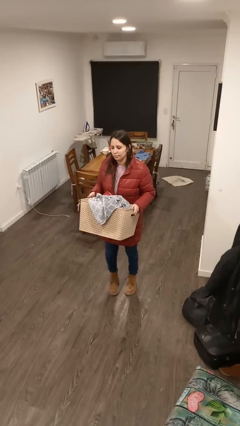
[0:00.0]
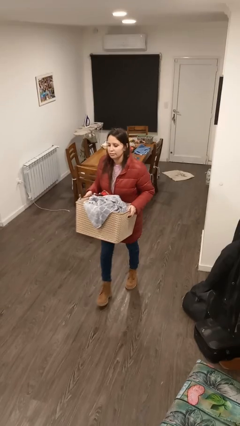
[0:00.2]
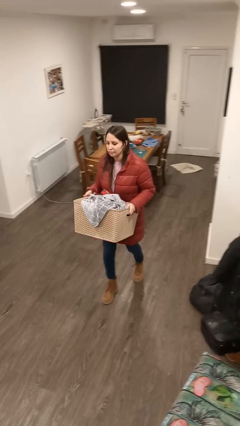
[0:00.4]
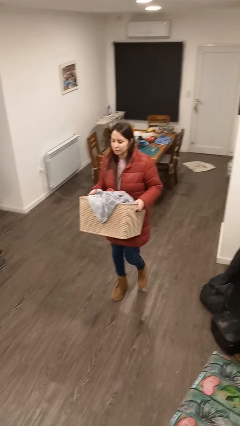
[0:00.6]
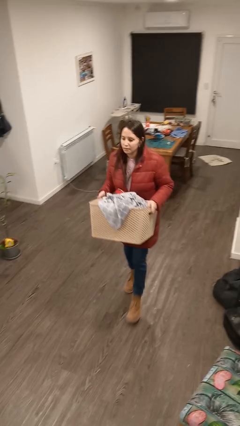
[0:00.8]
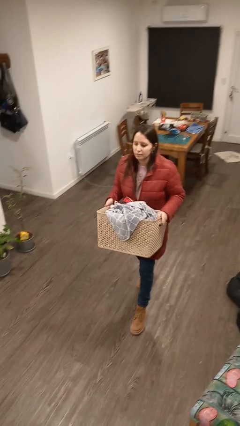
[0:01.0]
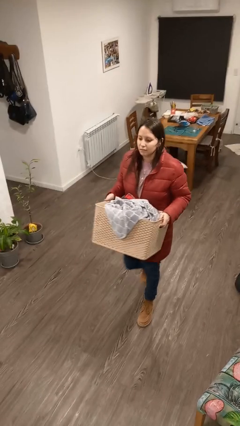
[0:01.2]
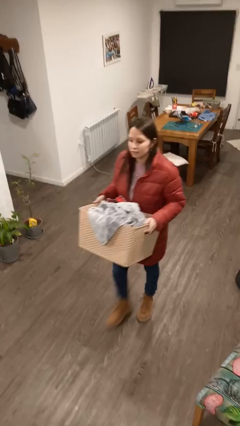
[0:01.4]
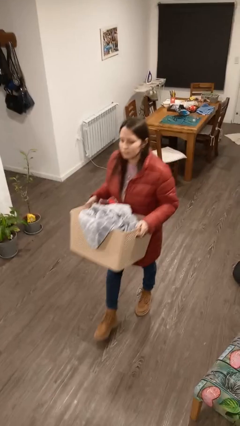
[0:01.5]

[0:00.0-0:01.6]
person carries laundry basket

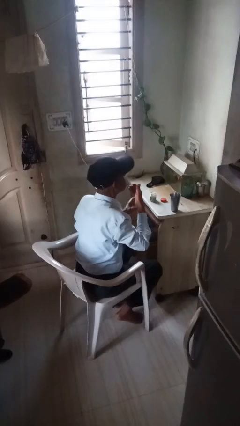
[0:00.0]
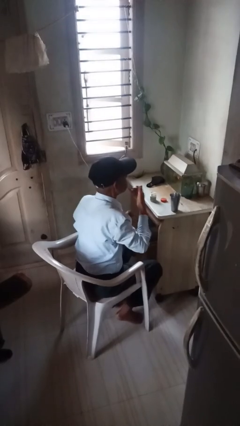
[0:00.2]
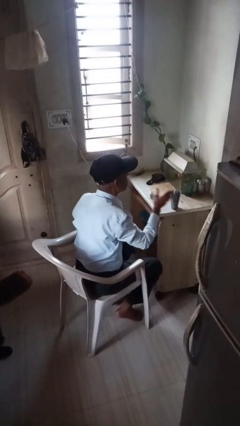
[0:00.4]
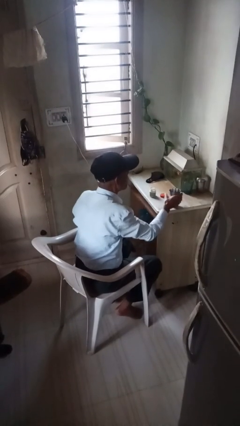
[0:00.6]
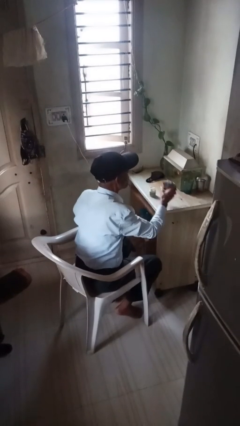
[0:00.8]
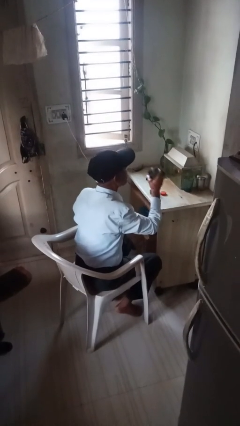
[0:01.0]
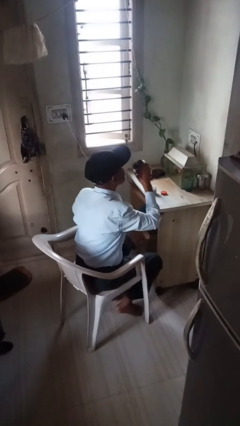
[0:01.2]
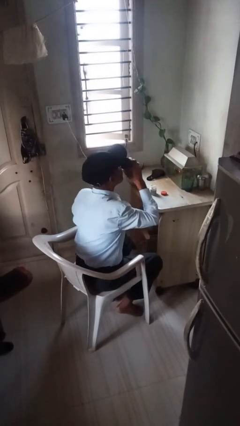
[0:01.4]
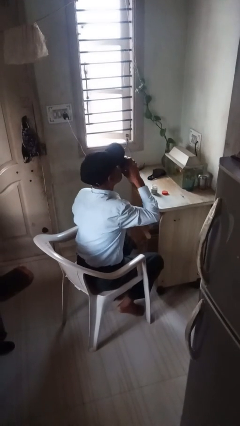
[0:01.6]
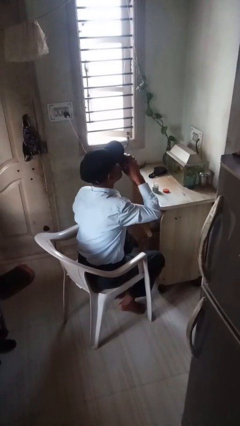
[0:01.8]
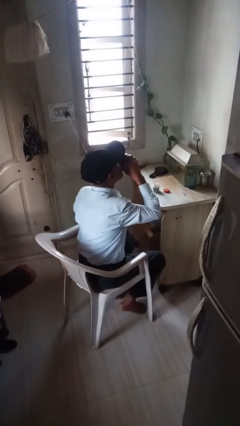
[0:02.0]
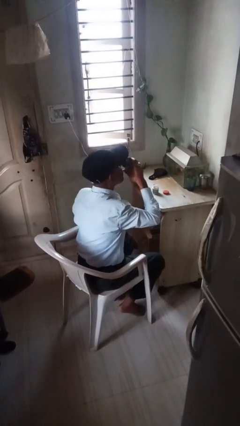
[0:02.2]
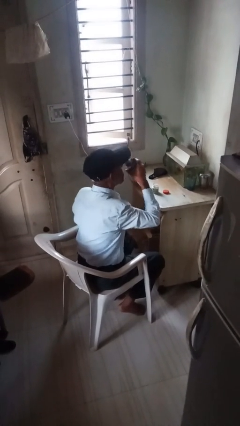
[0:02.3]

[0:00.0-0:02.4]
person drinks from cup

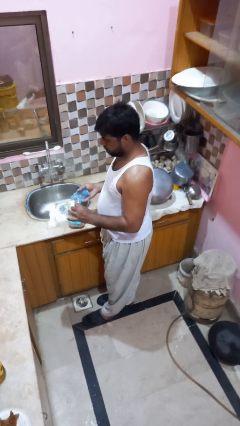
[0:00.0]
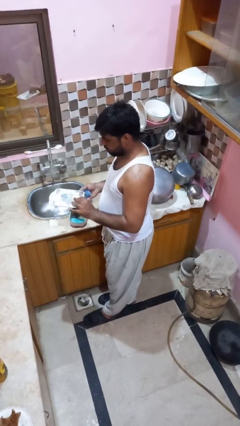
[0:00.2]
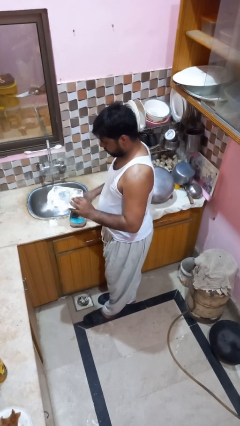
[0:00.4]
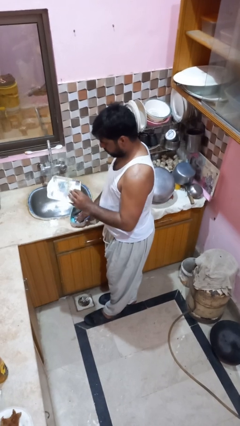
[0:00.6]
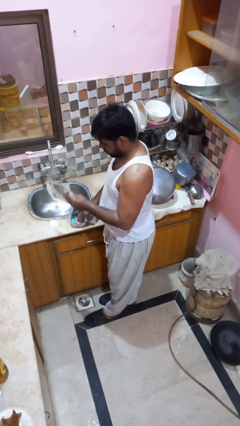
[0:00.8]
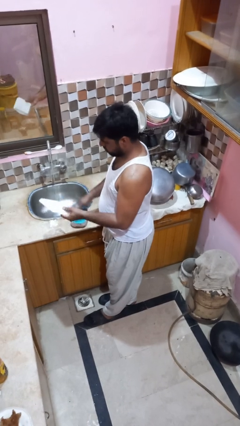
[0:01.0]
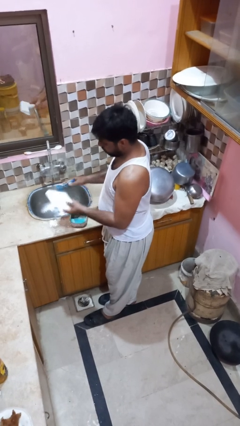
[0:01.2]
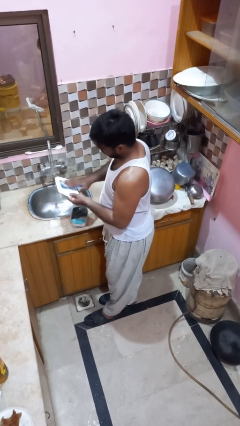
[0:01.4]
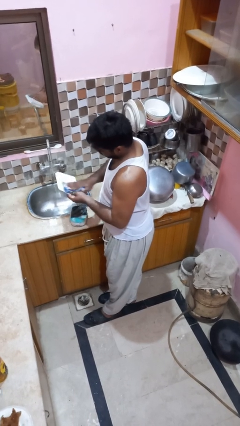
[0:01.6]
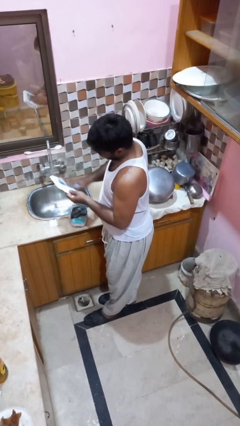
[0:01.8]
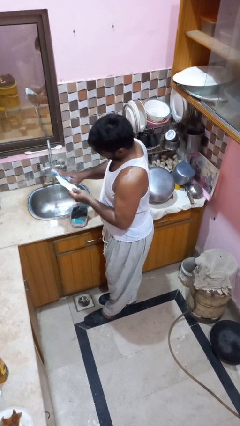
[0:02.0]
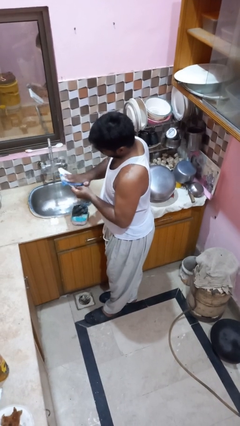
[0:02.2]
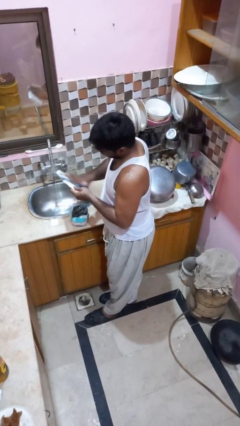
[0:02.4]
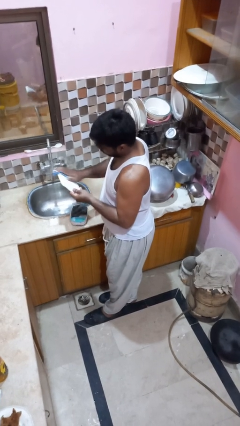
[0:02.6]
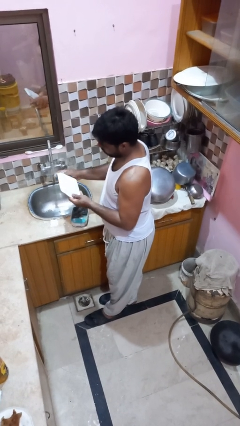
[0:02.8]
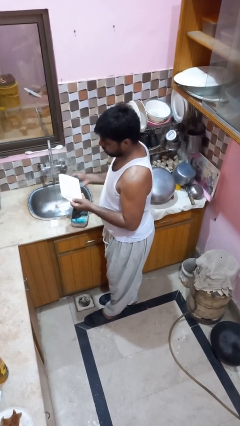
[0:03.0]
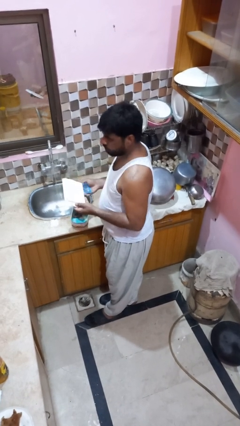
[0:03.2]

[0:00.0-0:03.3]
person washes dish

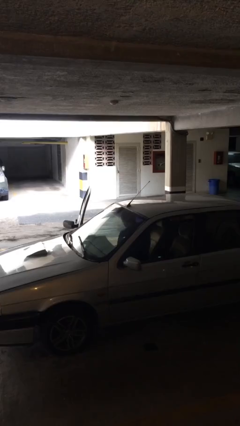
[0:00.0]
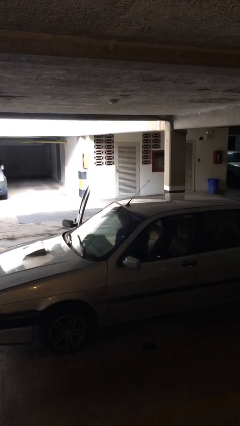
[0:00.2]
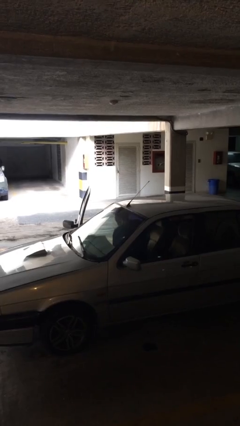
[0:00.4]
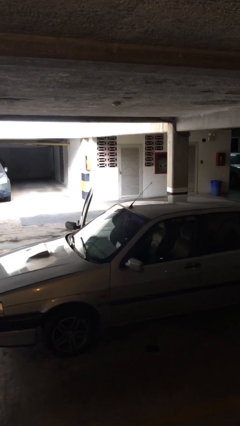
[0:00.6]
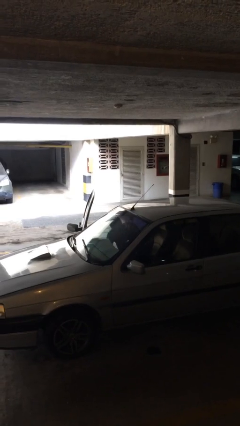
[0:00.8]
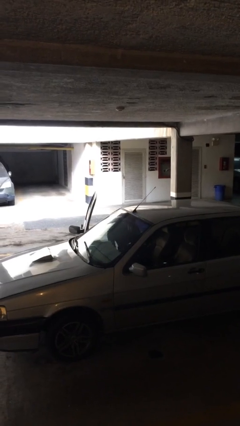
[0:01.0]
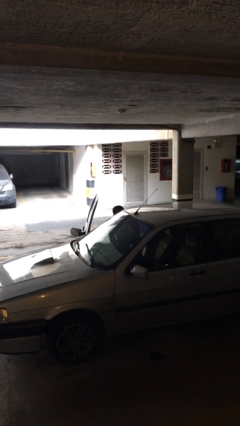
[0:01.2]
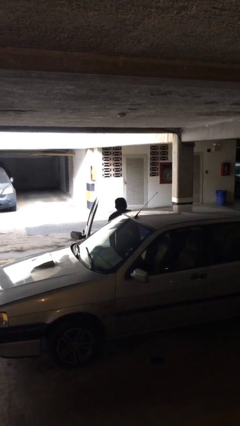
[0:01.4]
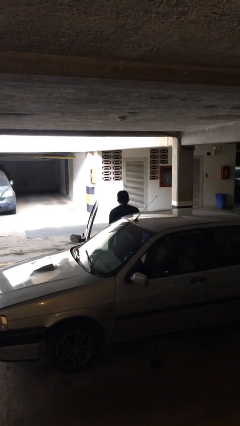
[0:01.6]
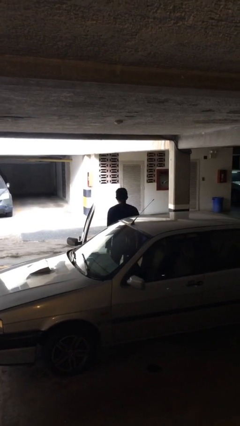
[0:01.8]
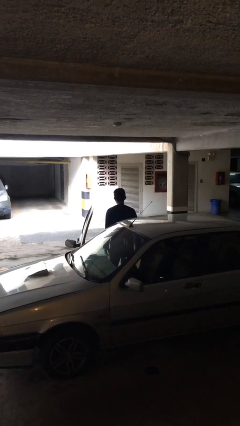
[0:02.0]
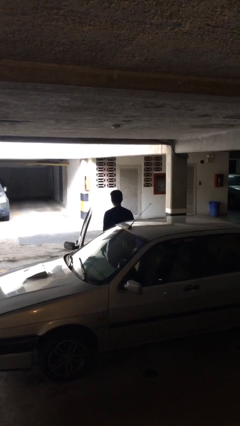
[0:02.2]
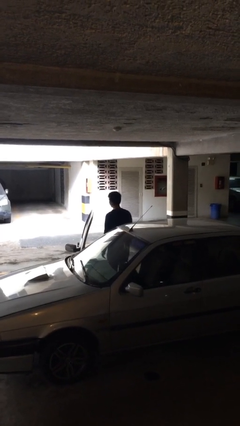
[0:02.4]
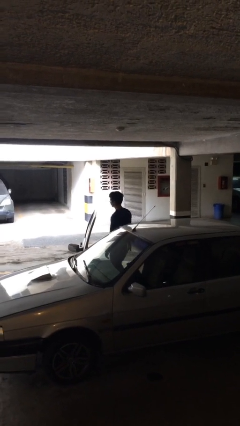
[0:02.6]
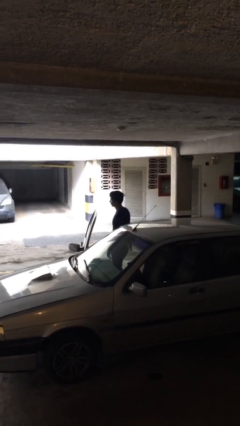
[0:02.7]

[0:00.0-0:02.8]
person exits car

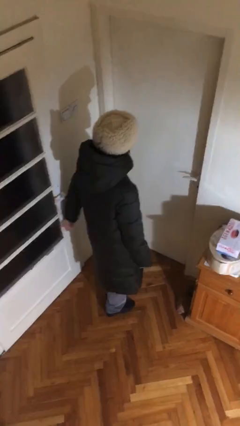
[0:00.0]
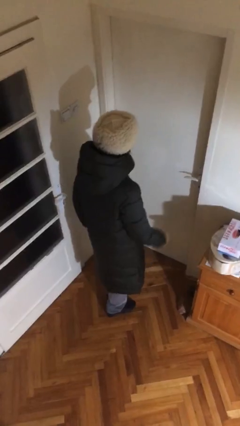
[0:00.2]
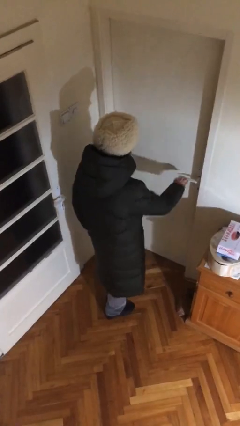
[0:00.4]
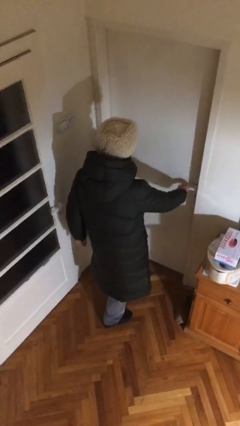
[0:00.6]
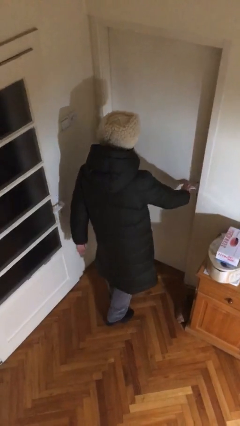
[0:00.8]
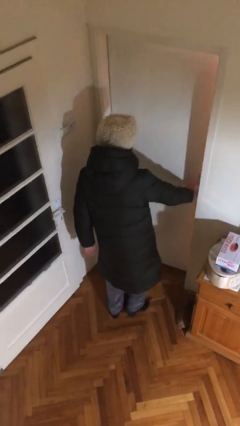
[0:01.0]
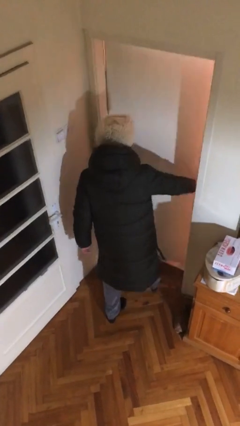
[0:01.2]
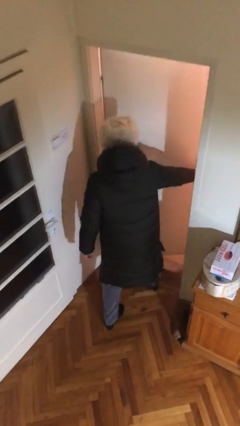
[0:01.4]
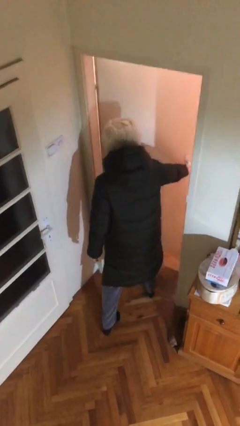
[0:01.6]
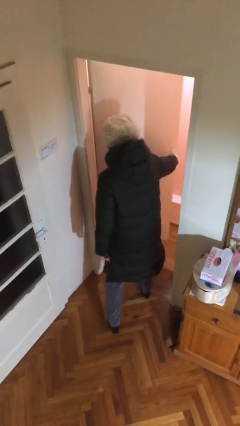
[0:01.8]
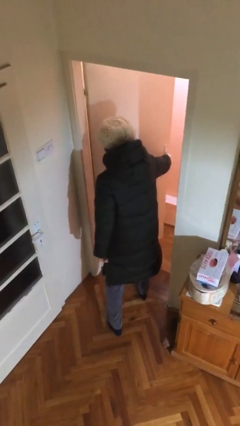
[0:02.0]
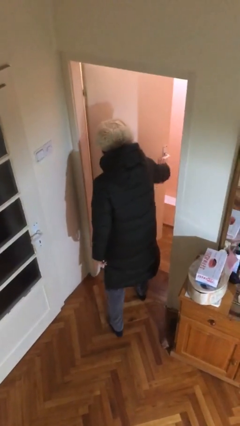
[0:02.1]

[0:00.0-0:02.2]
person opens facility door

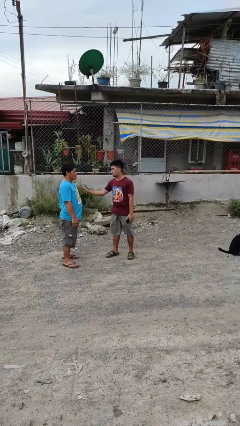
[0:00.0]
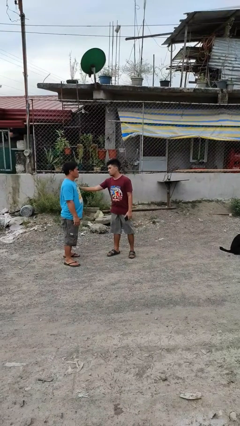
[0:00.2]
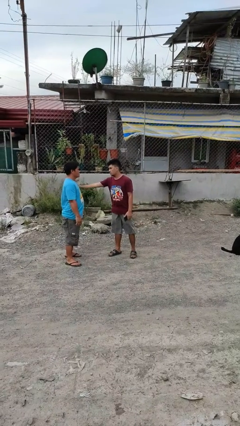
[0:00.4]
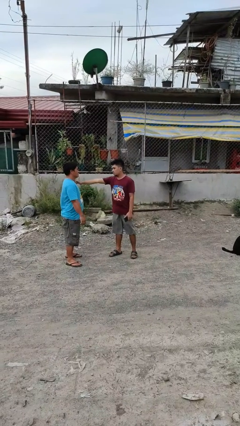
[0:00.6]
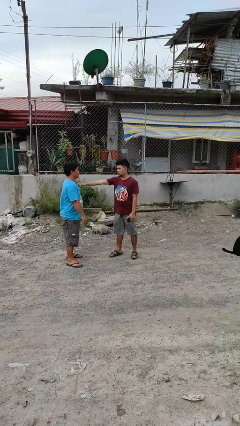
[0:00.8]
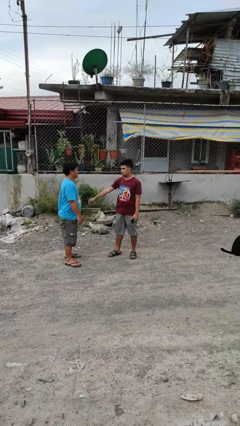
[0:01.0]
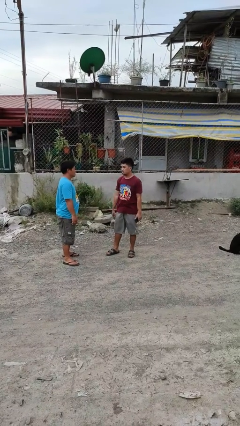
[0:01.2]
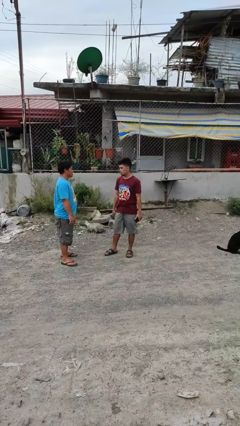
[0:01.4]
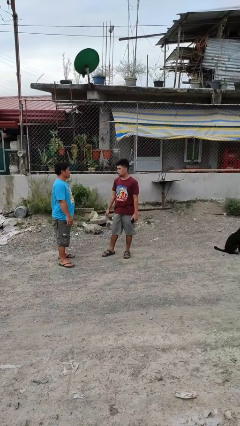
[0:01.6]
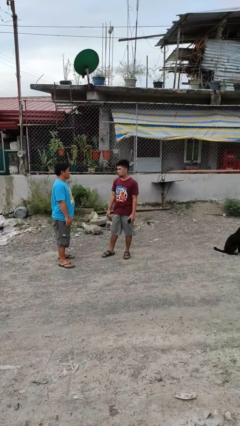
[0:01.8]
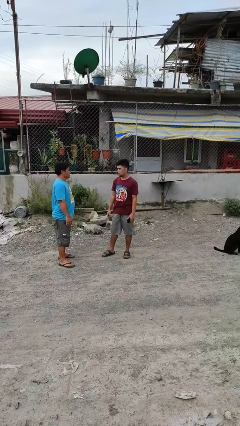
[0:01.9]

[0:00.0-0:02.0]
person shoves person

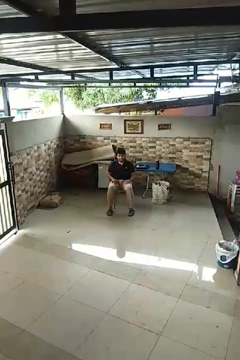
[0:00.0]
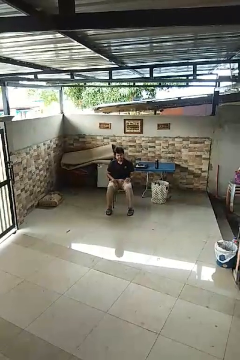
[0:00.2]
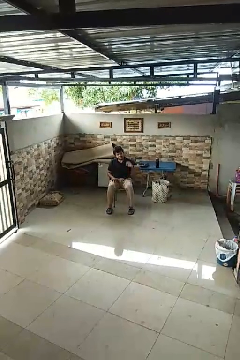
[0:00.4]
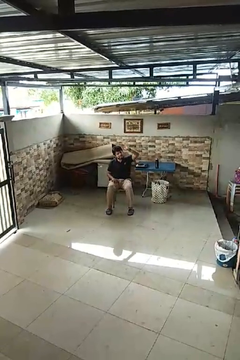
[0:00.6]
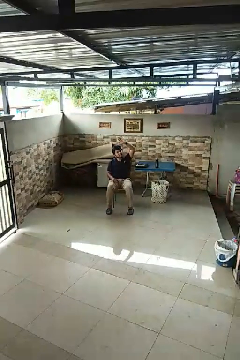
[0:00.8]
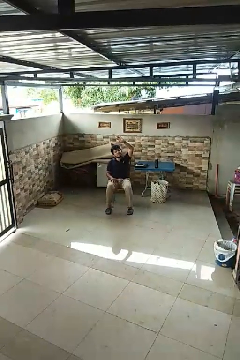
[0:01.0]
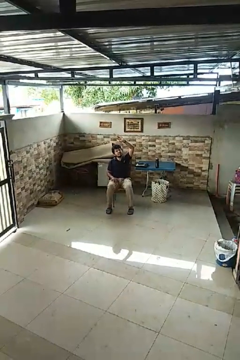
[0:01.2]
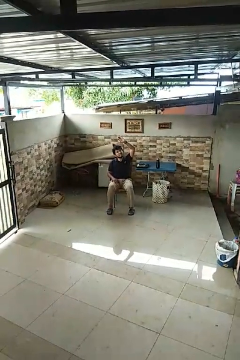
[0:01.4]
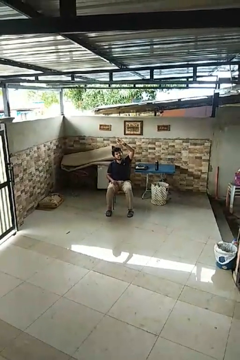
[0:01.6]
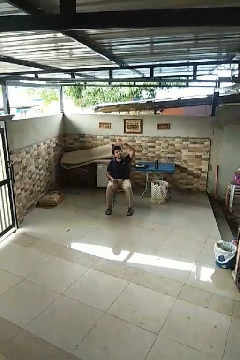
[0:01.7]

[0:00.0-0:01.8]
person gestures raise hand

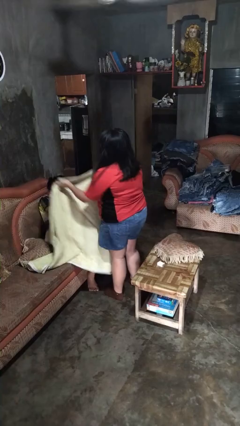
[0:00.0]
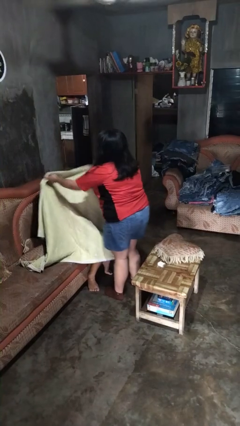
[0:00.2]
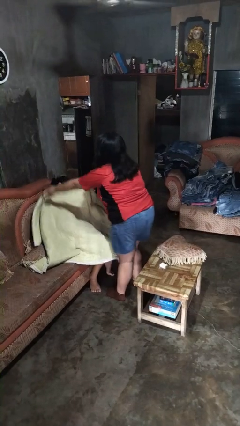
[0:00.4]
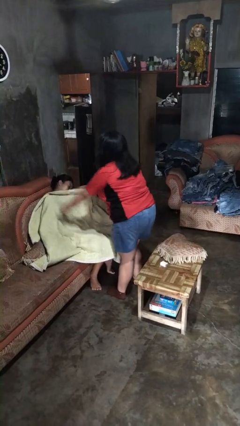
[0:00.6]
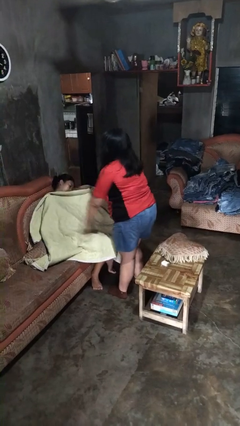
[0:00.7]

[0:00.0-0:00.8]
person covers friend with blanket

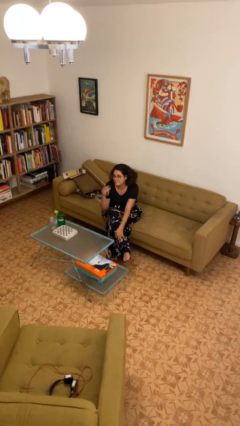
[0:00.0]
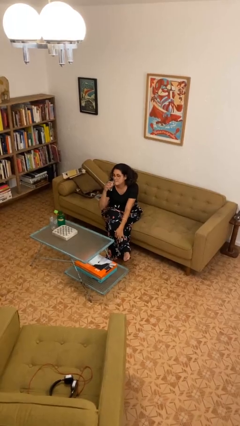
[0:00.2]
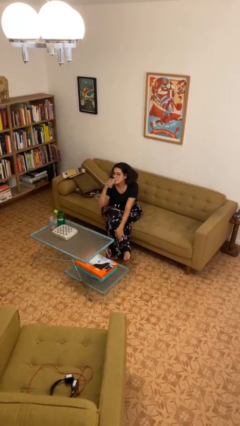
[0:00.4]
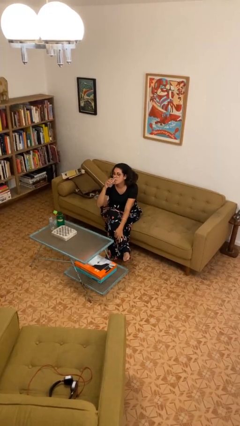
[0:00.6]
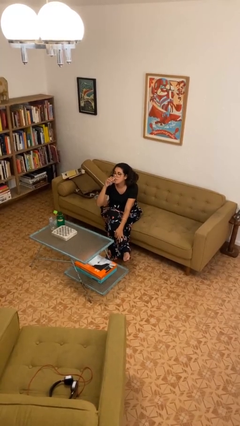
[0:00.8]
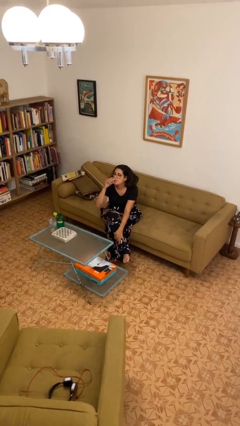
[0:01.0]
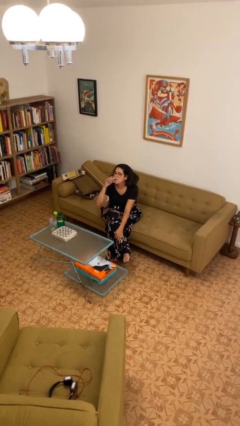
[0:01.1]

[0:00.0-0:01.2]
person drinks from shotglass
